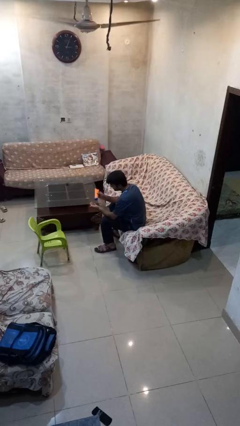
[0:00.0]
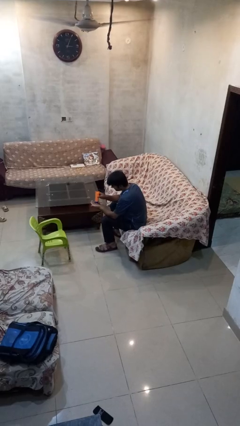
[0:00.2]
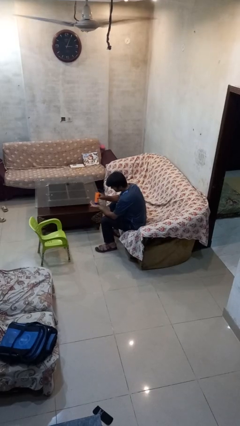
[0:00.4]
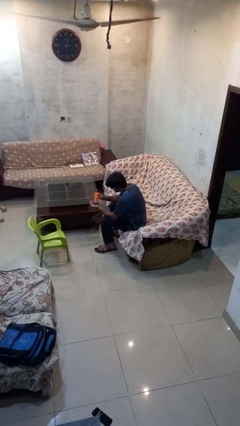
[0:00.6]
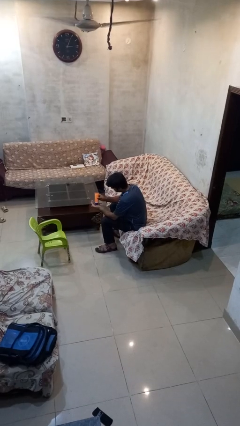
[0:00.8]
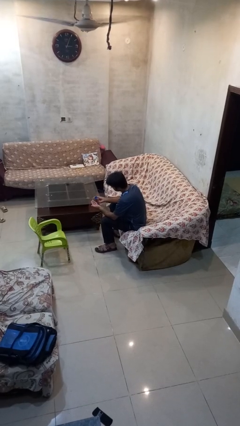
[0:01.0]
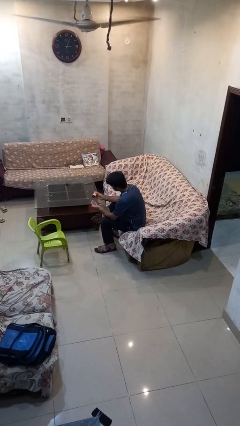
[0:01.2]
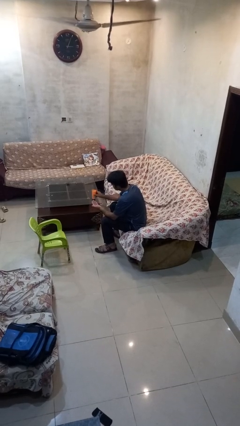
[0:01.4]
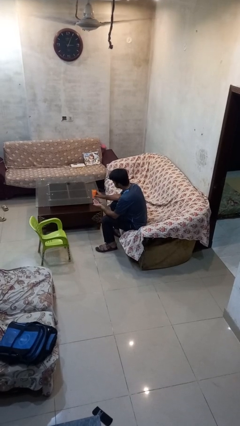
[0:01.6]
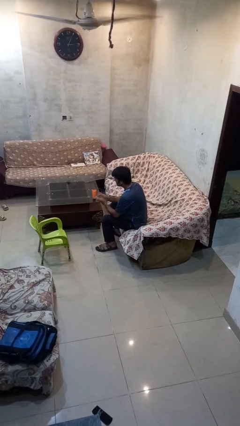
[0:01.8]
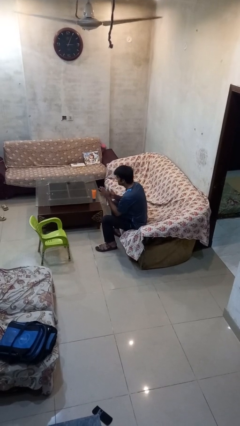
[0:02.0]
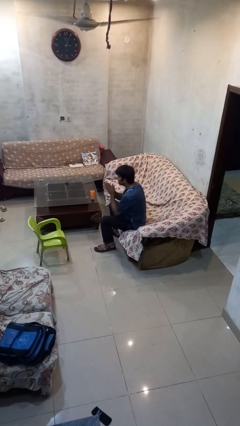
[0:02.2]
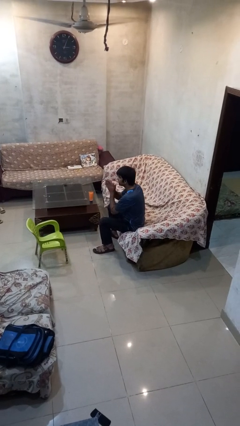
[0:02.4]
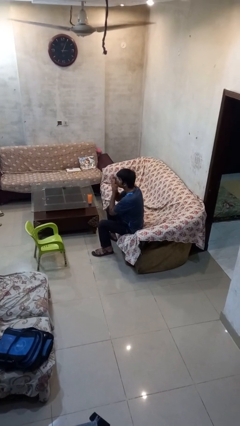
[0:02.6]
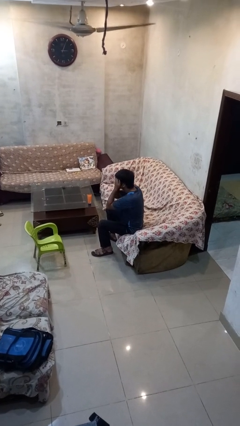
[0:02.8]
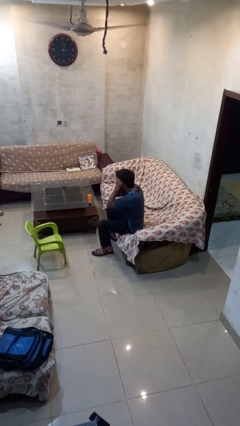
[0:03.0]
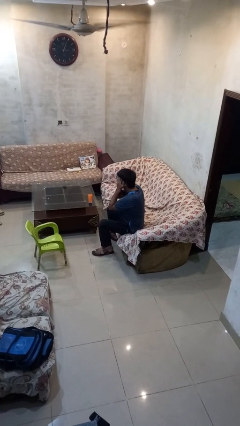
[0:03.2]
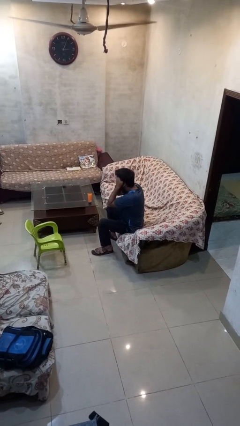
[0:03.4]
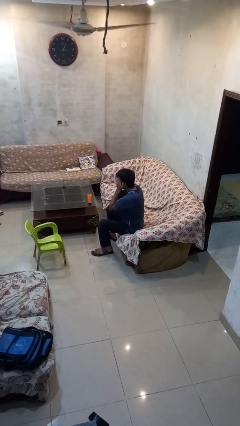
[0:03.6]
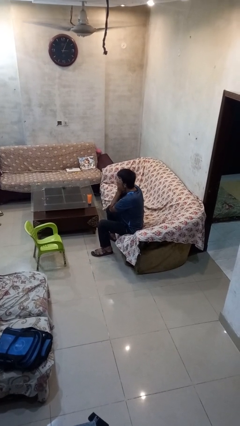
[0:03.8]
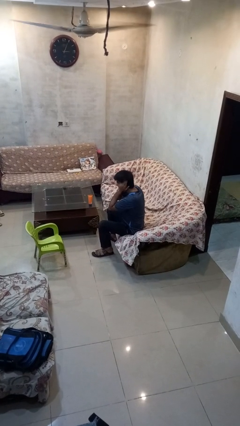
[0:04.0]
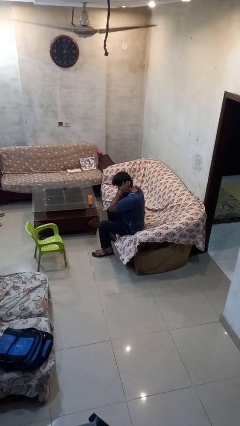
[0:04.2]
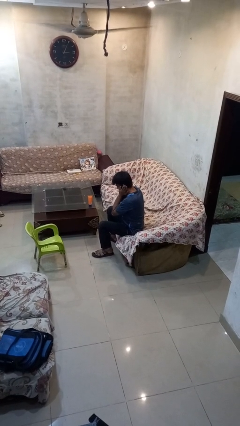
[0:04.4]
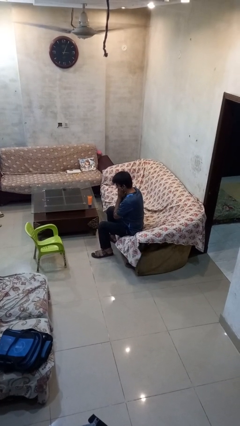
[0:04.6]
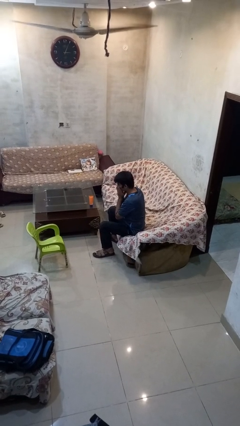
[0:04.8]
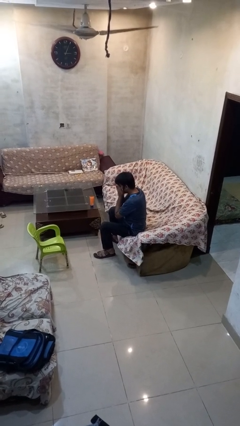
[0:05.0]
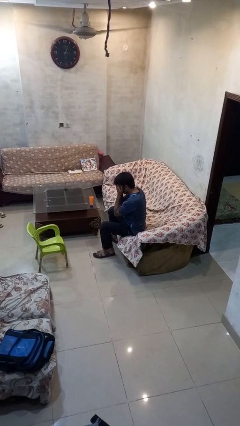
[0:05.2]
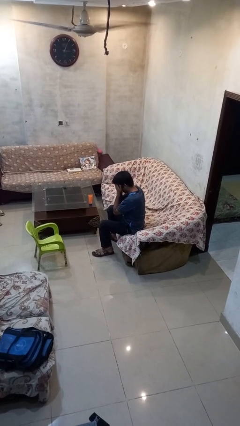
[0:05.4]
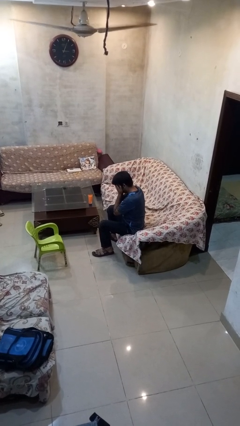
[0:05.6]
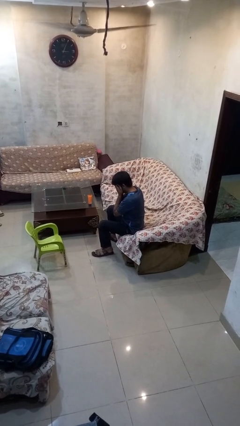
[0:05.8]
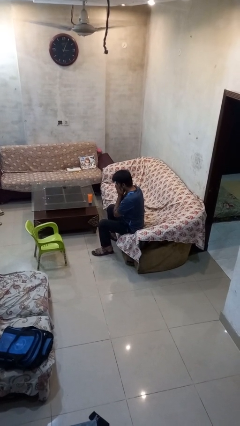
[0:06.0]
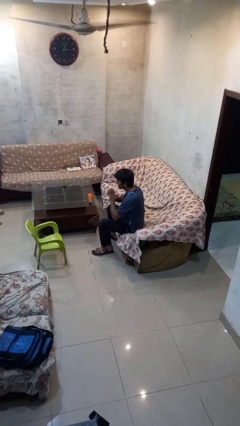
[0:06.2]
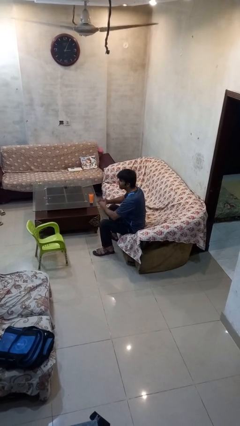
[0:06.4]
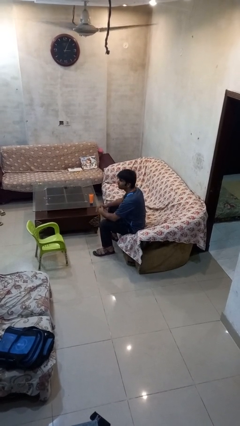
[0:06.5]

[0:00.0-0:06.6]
person applies sunscreen

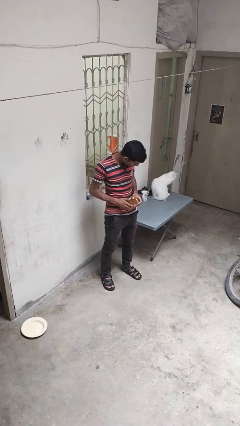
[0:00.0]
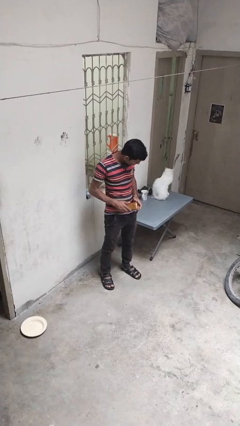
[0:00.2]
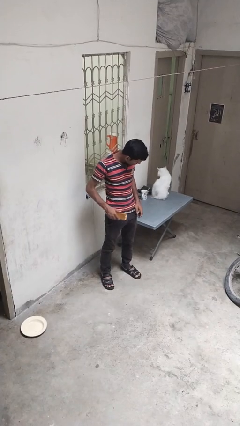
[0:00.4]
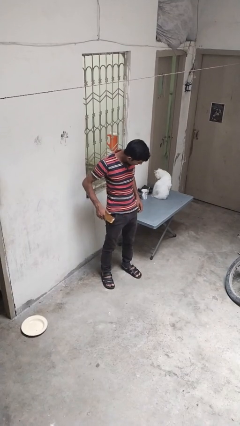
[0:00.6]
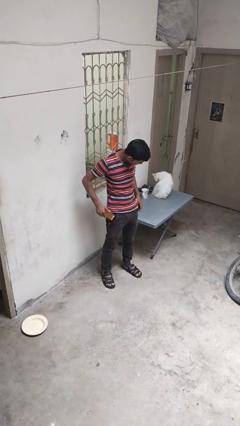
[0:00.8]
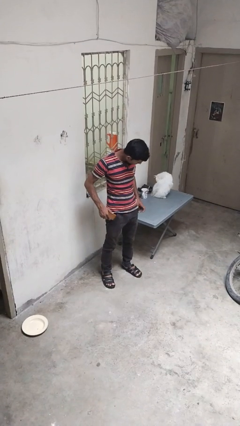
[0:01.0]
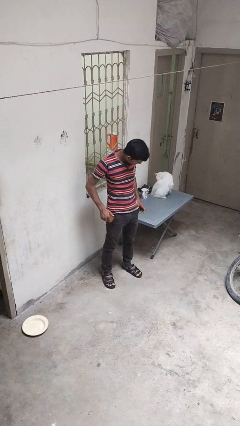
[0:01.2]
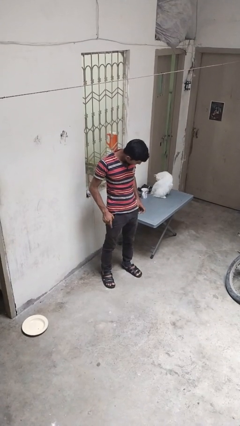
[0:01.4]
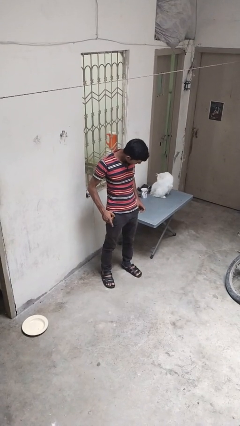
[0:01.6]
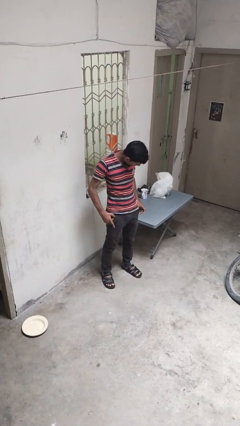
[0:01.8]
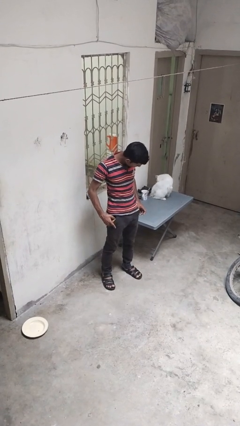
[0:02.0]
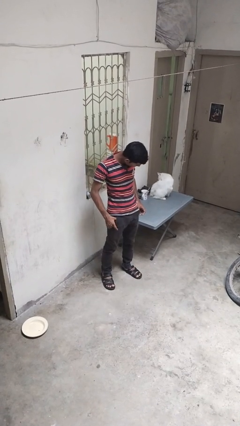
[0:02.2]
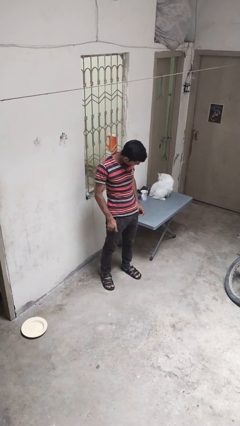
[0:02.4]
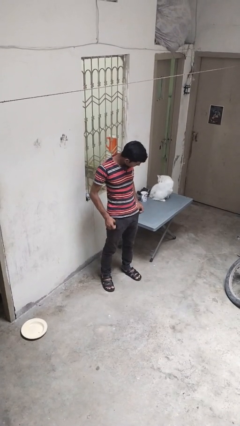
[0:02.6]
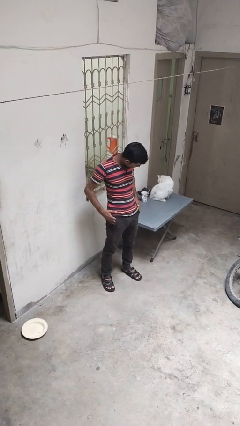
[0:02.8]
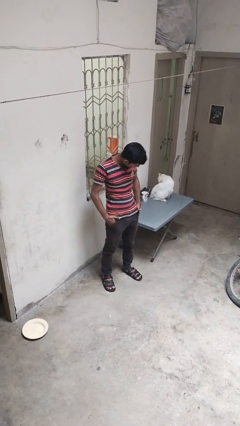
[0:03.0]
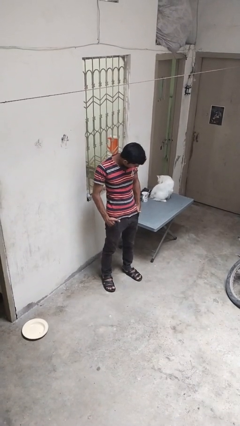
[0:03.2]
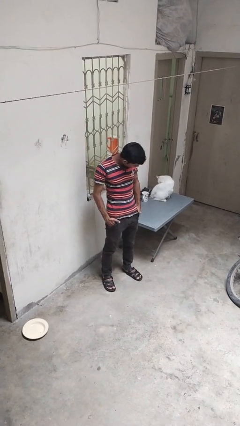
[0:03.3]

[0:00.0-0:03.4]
person puts phone into pocket

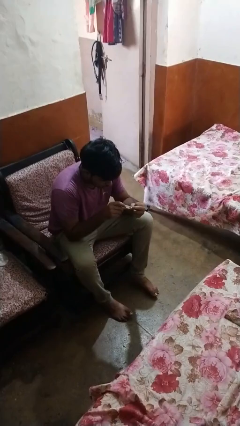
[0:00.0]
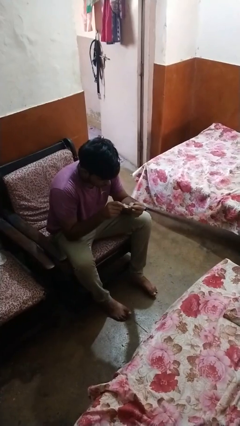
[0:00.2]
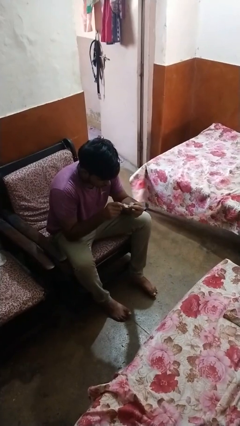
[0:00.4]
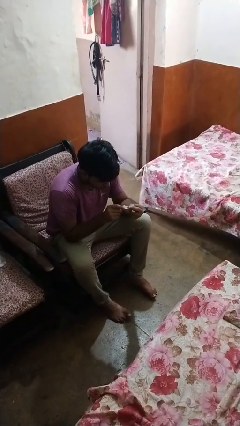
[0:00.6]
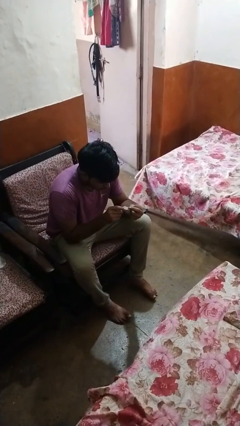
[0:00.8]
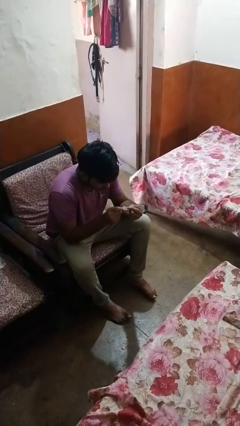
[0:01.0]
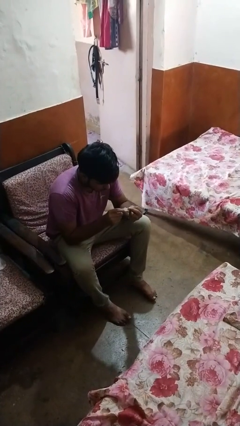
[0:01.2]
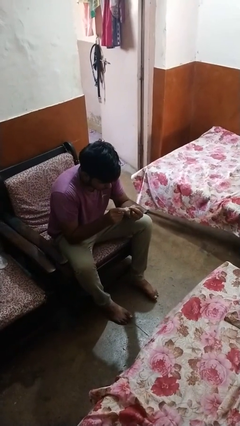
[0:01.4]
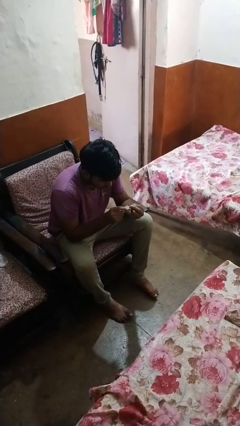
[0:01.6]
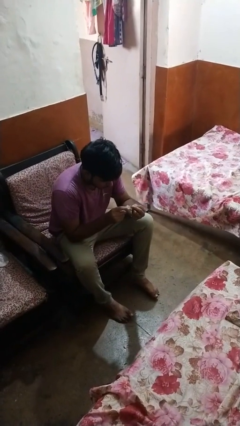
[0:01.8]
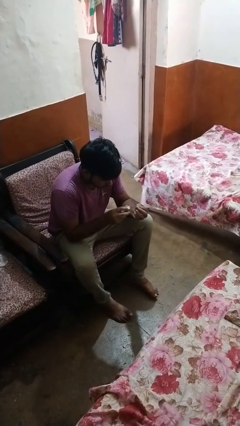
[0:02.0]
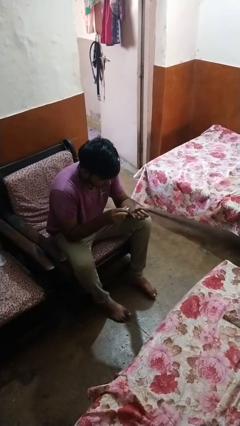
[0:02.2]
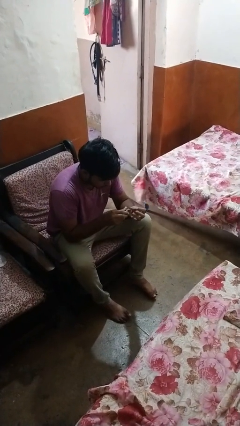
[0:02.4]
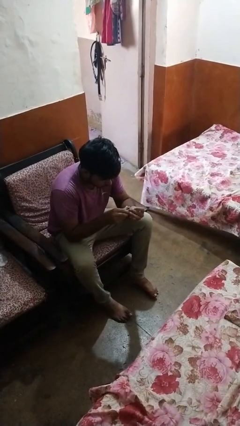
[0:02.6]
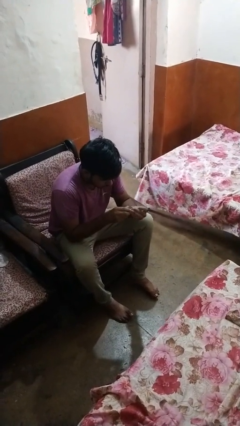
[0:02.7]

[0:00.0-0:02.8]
person clips fingernails

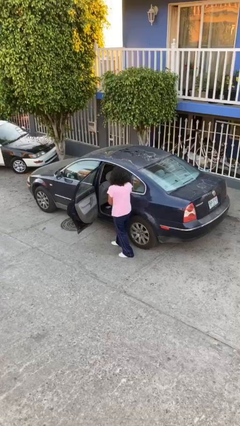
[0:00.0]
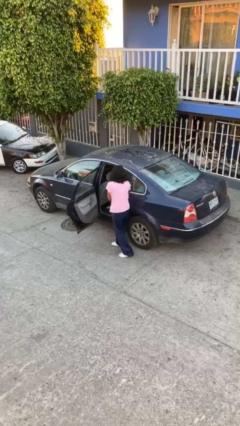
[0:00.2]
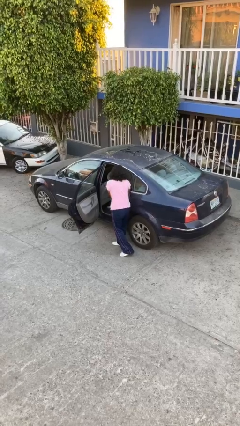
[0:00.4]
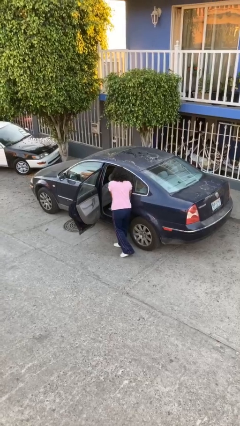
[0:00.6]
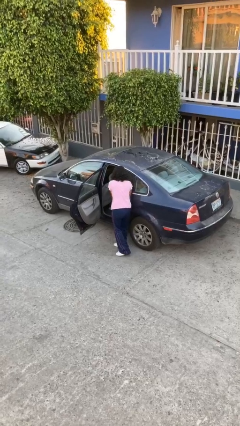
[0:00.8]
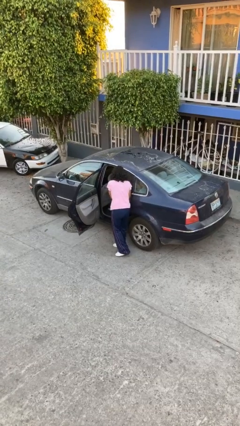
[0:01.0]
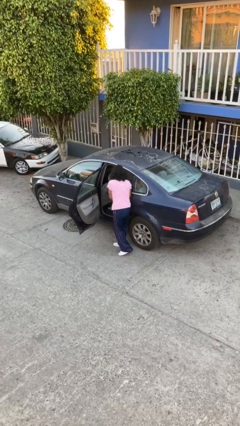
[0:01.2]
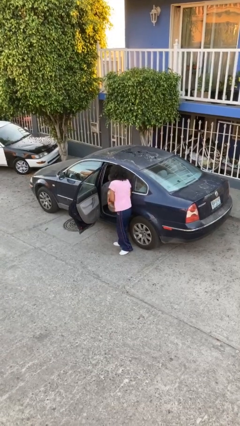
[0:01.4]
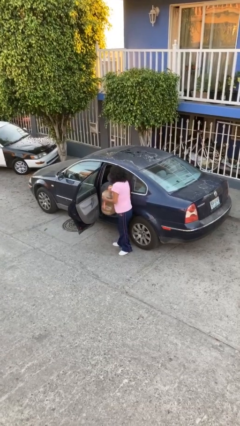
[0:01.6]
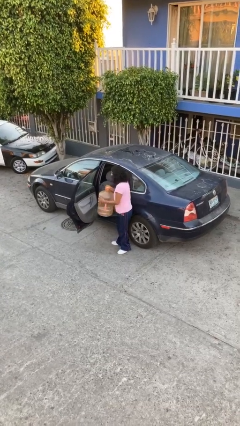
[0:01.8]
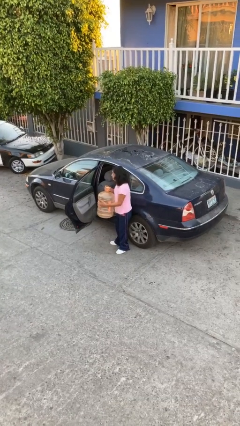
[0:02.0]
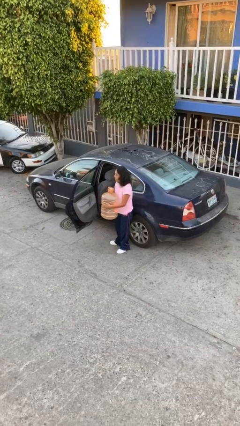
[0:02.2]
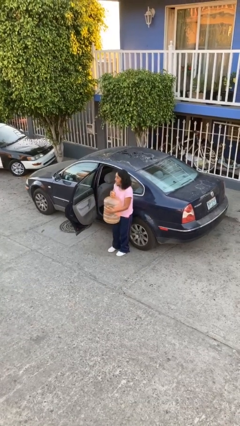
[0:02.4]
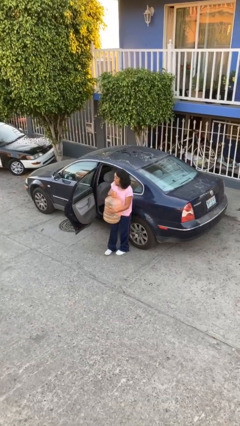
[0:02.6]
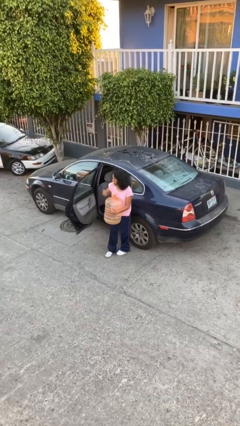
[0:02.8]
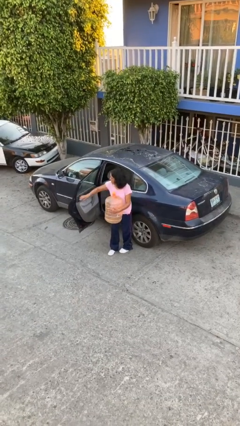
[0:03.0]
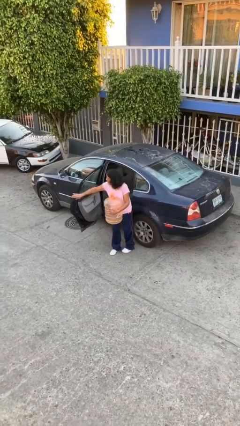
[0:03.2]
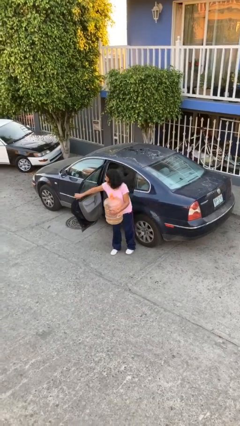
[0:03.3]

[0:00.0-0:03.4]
person unloads car

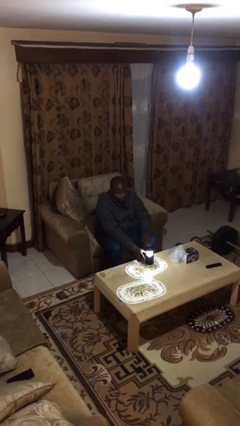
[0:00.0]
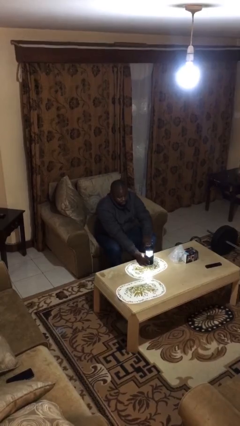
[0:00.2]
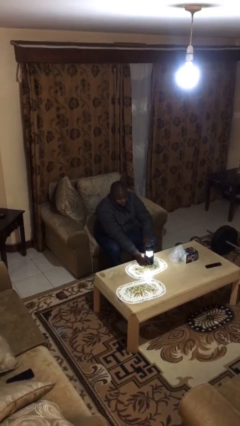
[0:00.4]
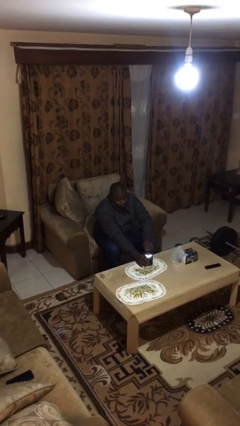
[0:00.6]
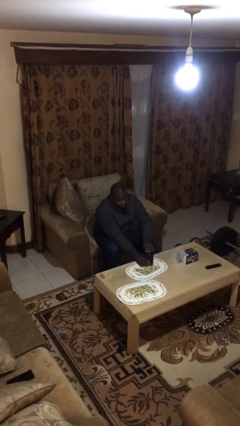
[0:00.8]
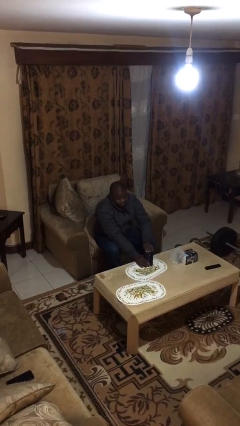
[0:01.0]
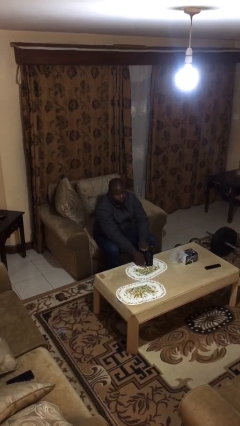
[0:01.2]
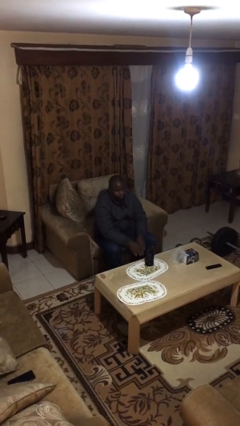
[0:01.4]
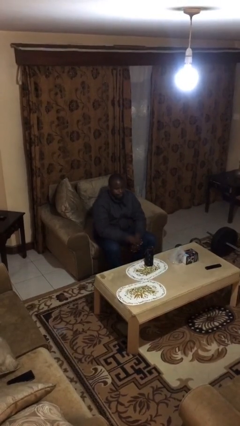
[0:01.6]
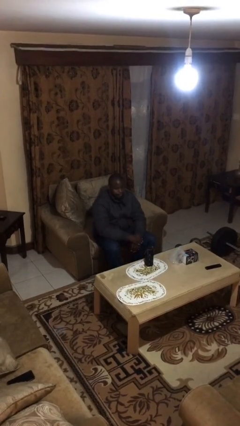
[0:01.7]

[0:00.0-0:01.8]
person turns off lamp
